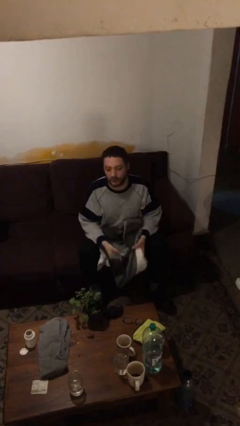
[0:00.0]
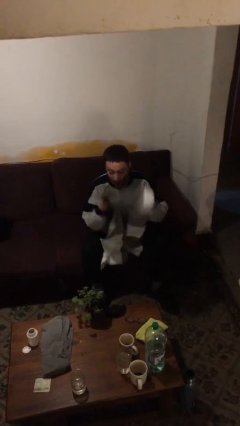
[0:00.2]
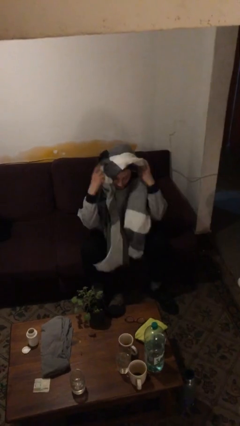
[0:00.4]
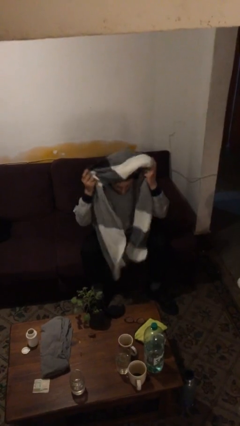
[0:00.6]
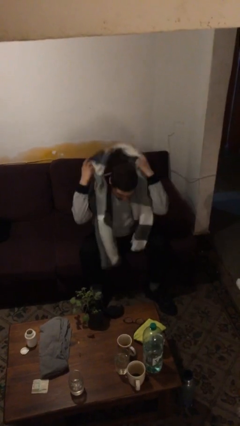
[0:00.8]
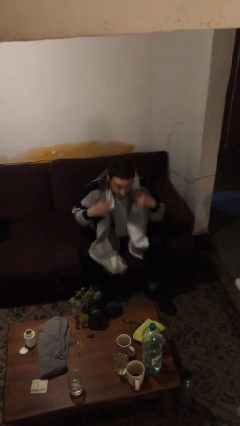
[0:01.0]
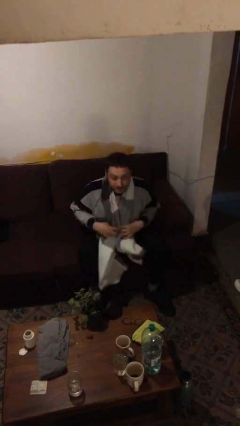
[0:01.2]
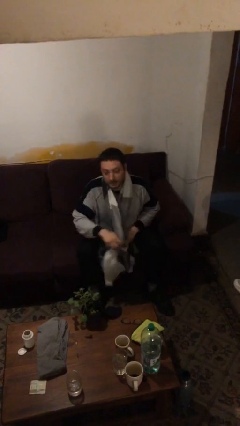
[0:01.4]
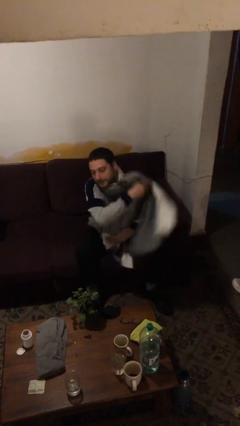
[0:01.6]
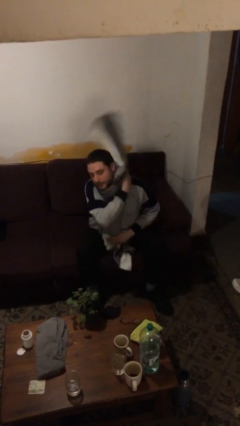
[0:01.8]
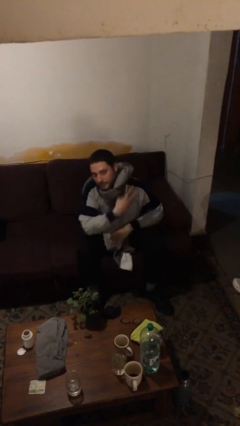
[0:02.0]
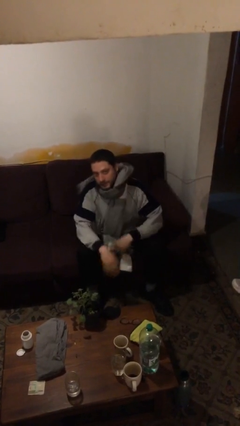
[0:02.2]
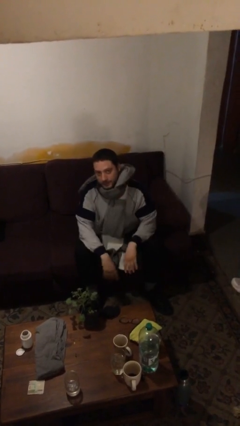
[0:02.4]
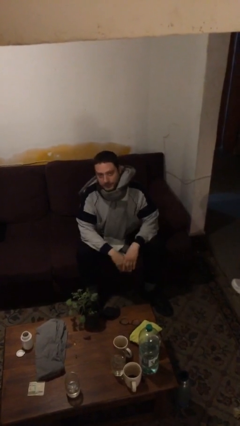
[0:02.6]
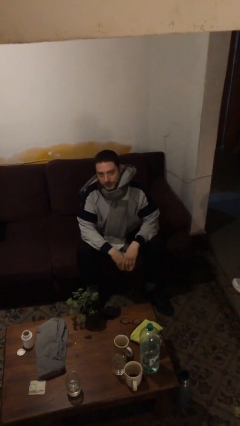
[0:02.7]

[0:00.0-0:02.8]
person puts on scarf

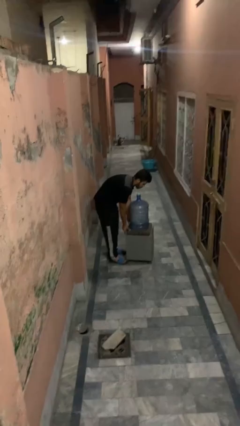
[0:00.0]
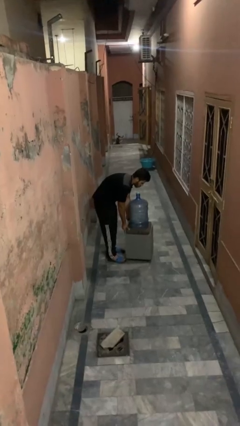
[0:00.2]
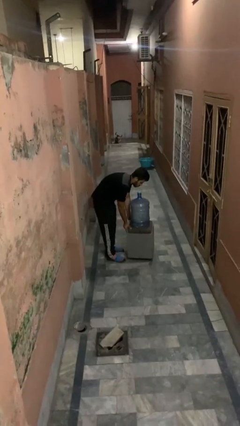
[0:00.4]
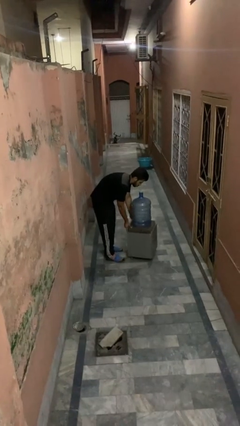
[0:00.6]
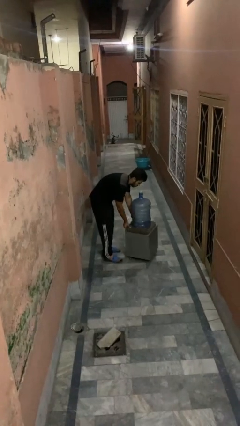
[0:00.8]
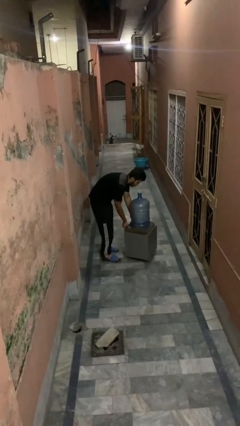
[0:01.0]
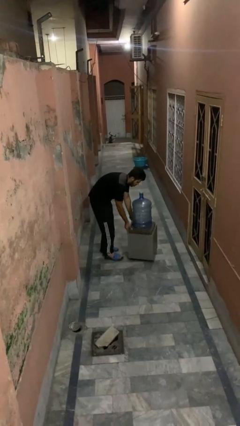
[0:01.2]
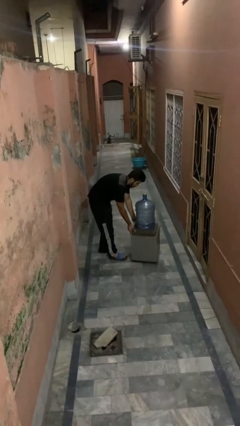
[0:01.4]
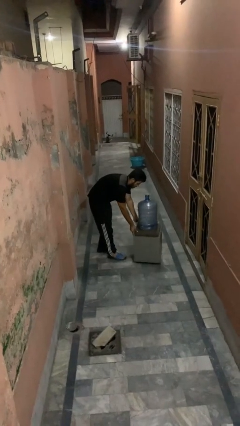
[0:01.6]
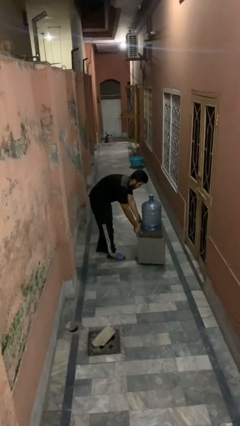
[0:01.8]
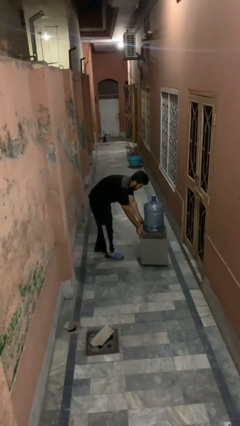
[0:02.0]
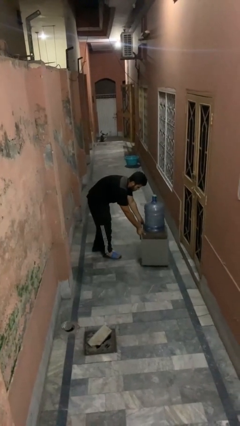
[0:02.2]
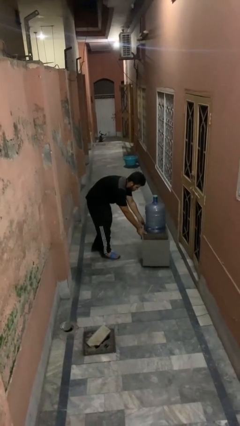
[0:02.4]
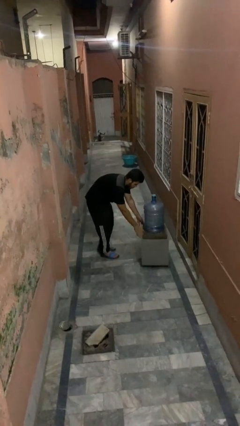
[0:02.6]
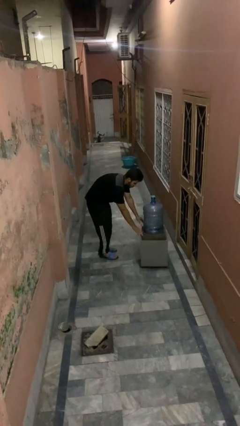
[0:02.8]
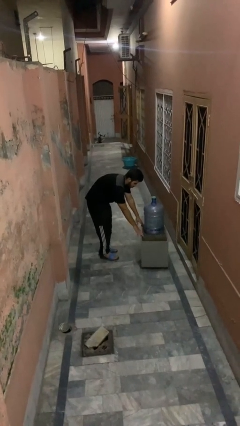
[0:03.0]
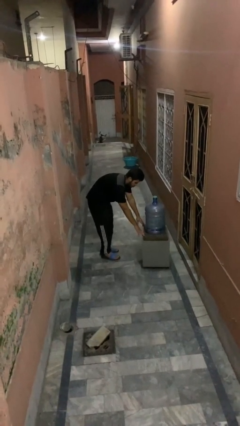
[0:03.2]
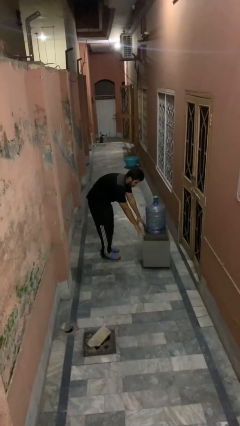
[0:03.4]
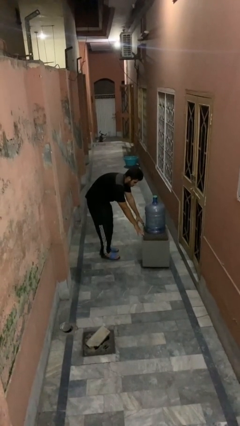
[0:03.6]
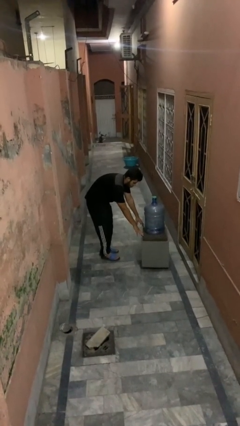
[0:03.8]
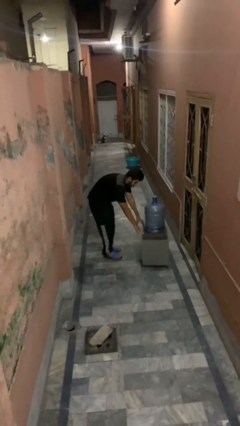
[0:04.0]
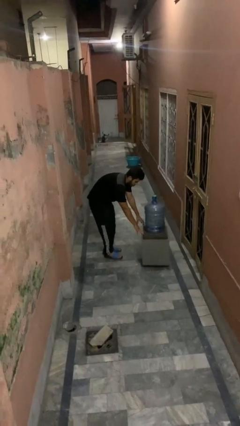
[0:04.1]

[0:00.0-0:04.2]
person pushes wheeled cart

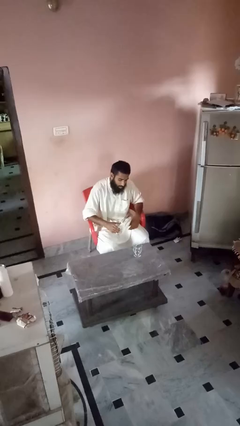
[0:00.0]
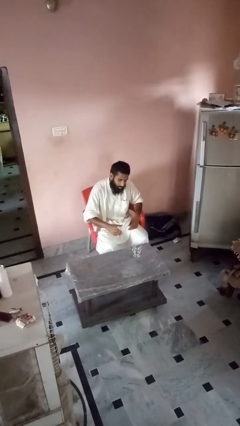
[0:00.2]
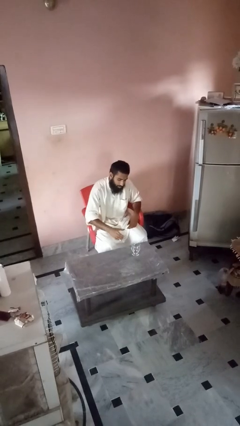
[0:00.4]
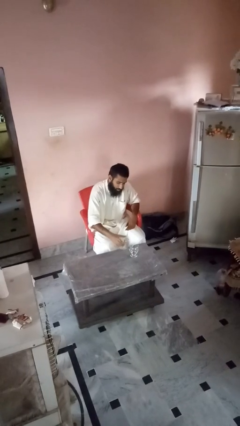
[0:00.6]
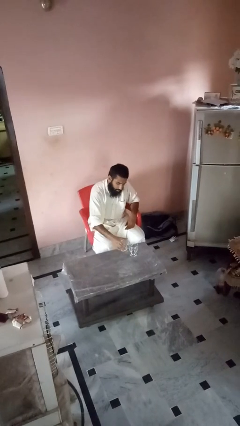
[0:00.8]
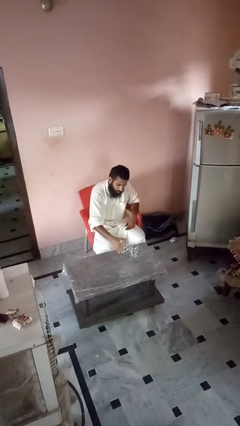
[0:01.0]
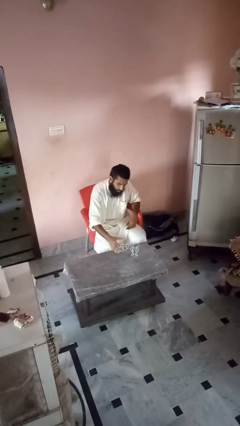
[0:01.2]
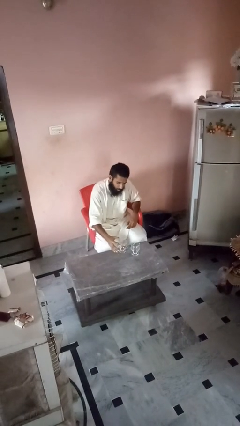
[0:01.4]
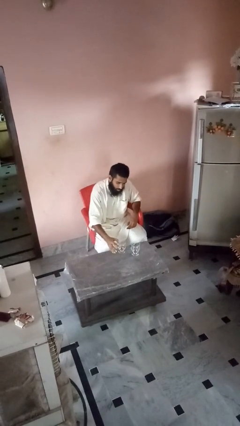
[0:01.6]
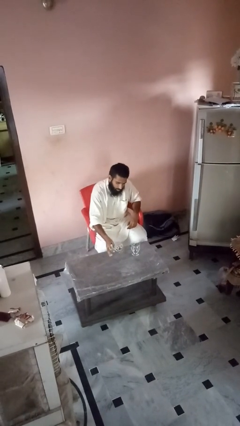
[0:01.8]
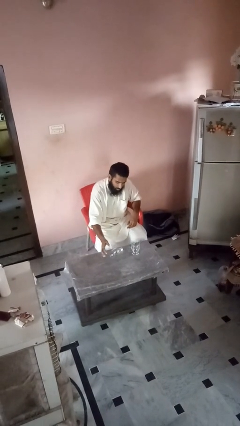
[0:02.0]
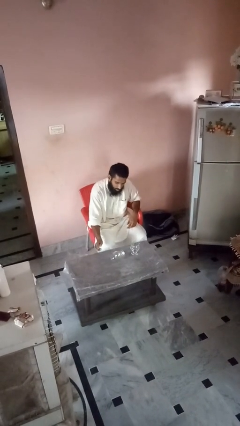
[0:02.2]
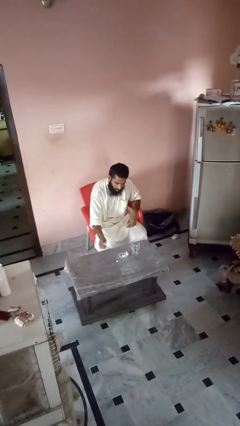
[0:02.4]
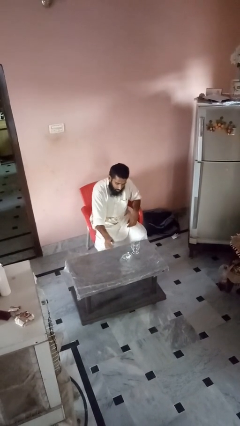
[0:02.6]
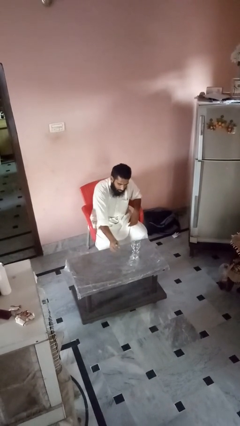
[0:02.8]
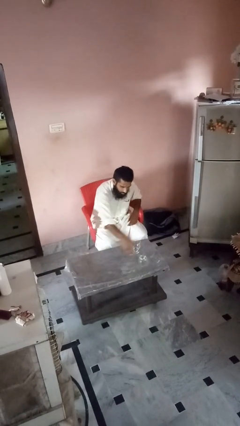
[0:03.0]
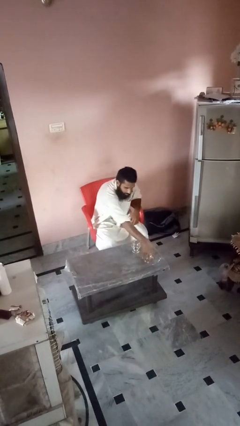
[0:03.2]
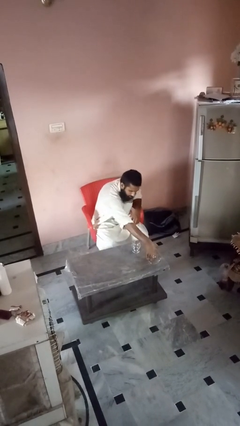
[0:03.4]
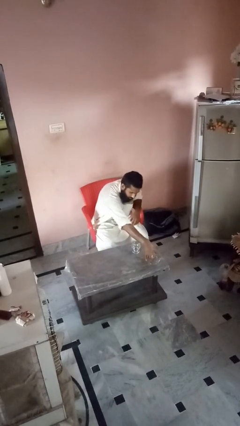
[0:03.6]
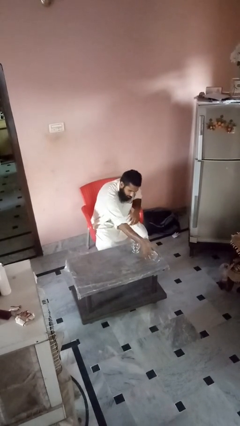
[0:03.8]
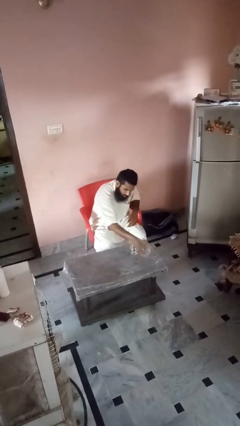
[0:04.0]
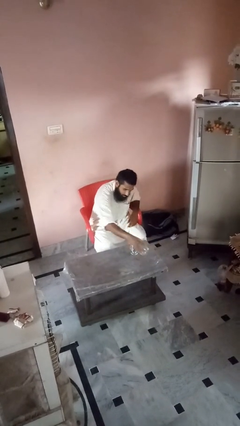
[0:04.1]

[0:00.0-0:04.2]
person knocks over glass

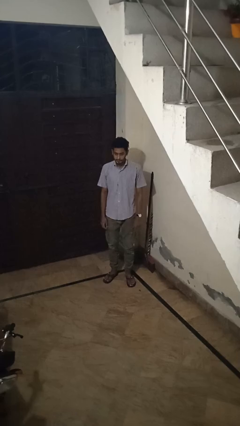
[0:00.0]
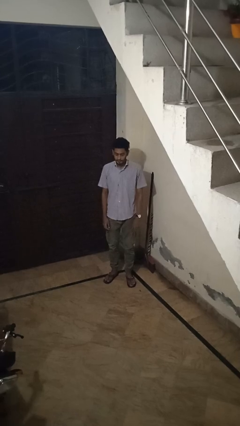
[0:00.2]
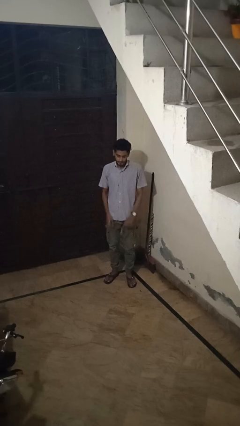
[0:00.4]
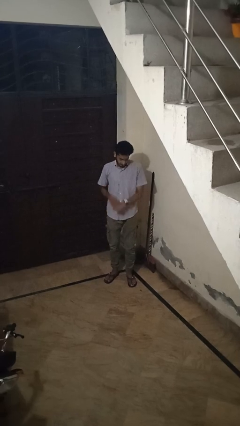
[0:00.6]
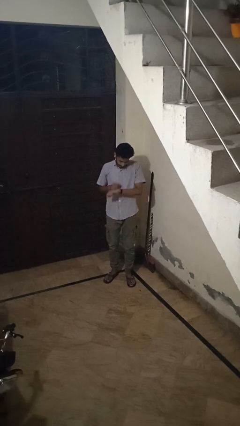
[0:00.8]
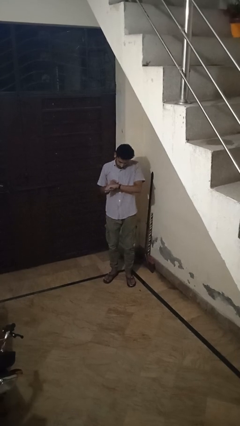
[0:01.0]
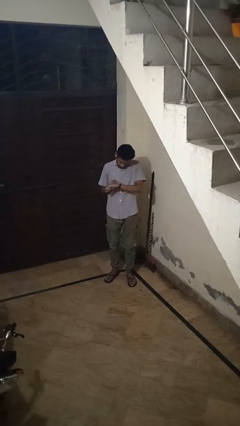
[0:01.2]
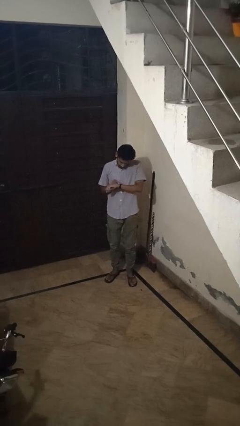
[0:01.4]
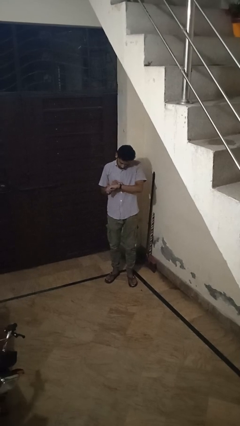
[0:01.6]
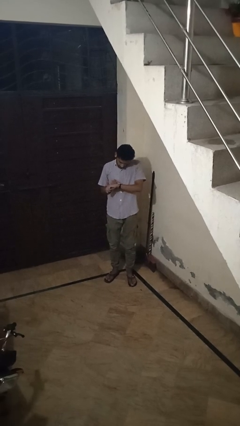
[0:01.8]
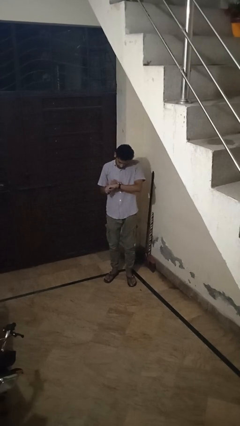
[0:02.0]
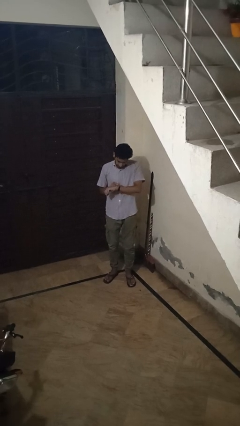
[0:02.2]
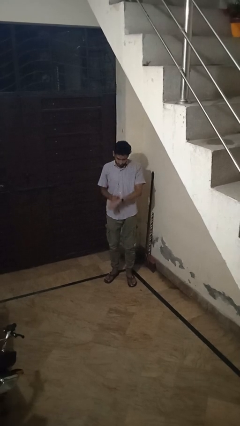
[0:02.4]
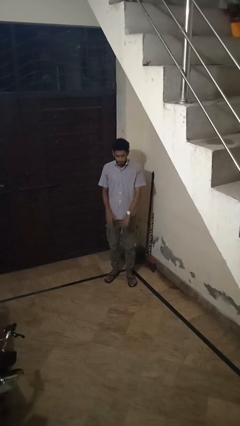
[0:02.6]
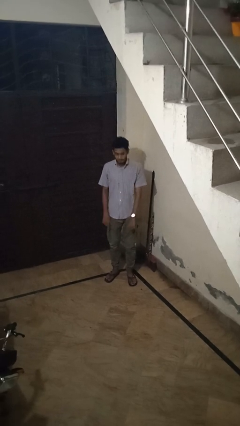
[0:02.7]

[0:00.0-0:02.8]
person looks at wristwatch

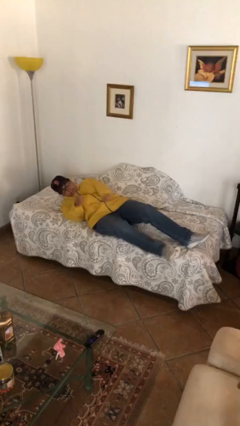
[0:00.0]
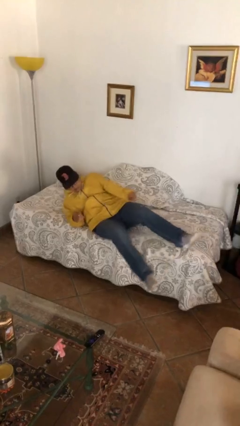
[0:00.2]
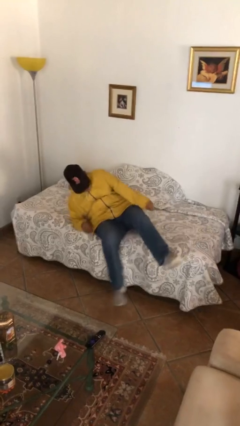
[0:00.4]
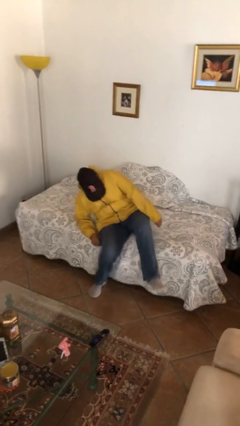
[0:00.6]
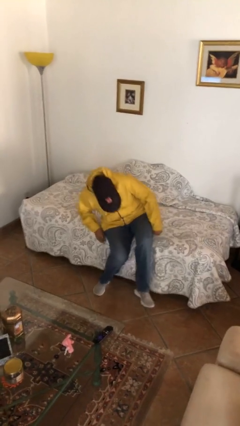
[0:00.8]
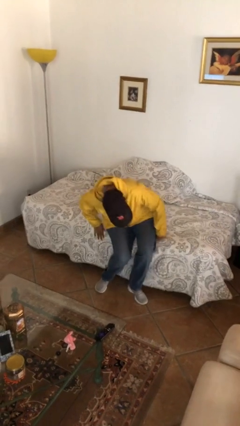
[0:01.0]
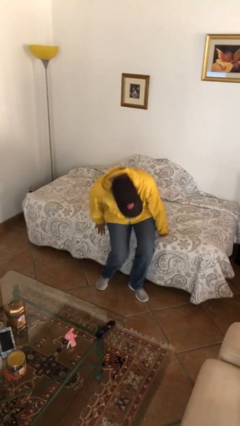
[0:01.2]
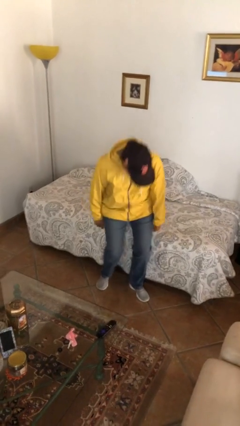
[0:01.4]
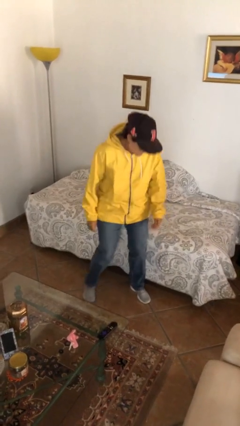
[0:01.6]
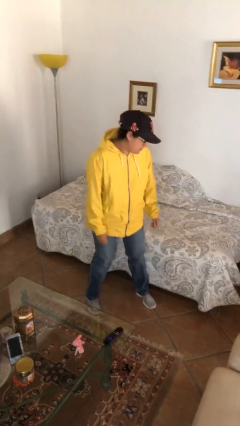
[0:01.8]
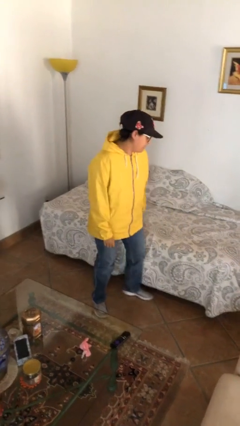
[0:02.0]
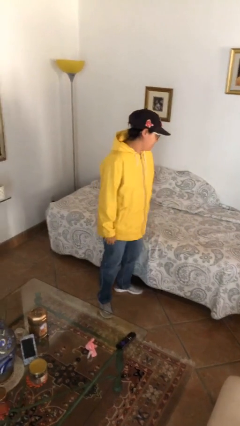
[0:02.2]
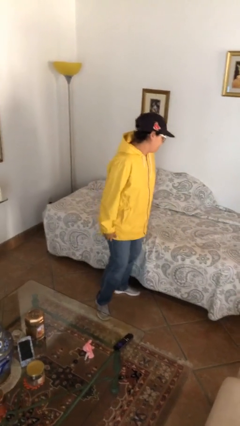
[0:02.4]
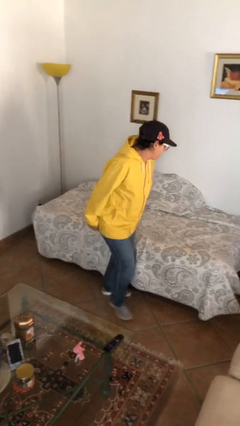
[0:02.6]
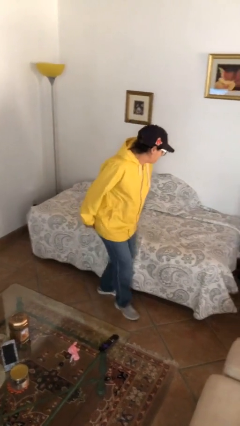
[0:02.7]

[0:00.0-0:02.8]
person stands up

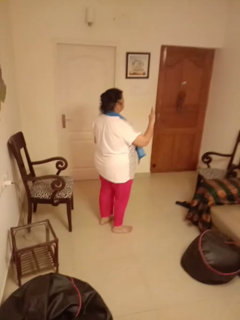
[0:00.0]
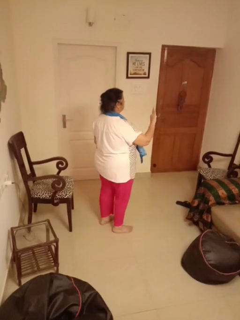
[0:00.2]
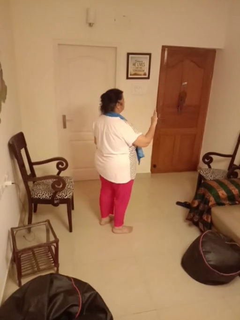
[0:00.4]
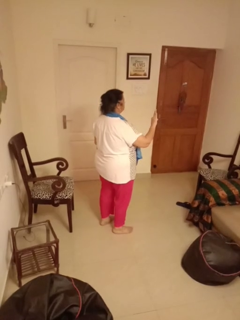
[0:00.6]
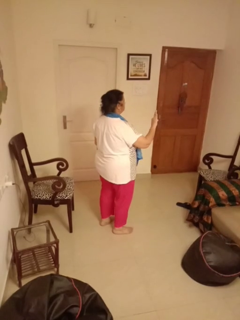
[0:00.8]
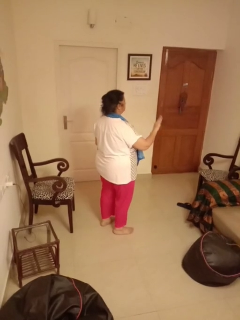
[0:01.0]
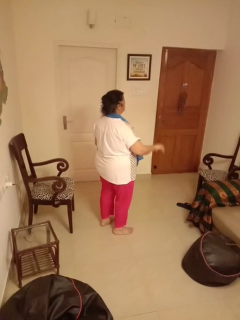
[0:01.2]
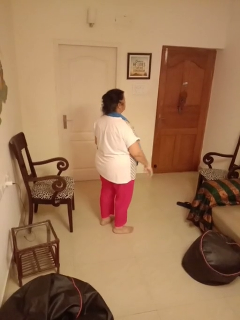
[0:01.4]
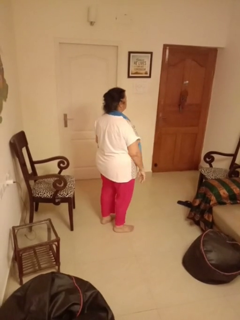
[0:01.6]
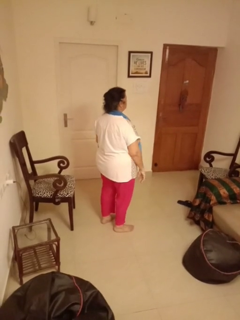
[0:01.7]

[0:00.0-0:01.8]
person gestures number three
